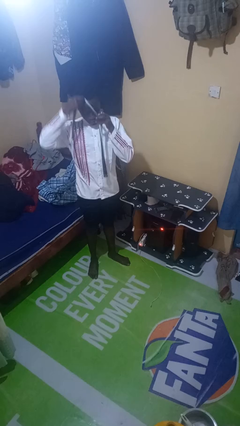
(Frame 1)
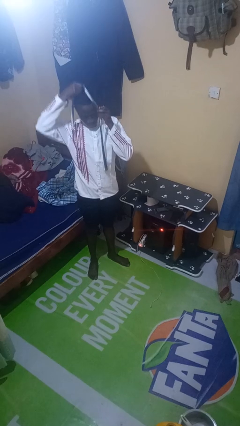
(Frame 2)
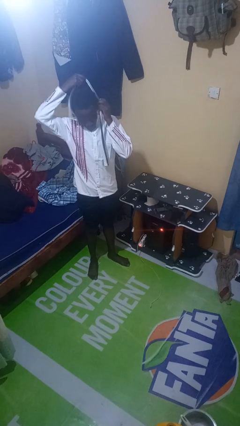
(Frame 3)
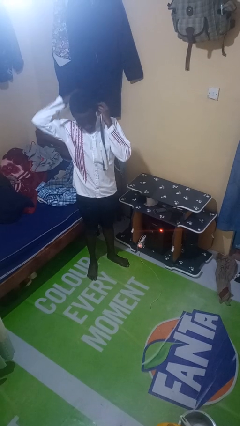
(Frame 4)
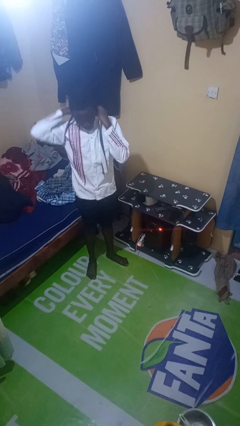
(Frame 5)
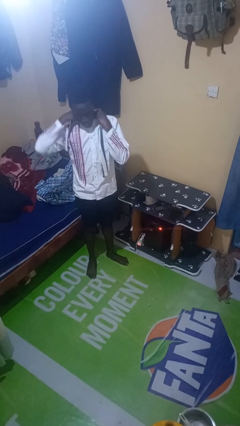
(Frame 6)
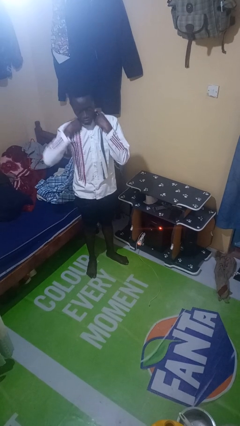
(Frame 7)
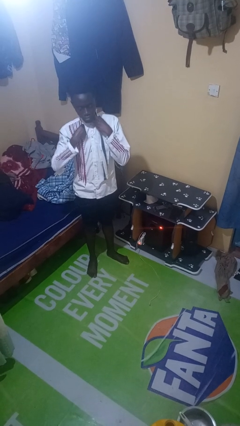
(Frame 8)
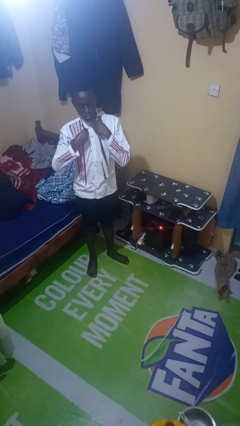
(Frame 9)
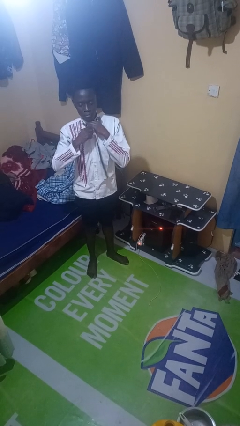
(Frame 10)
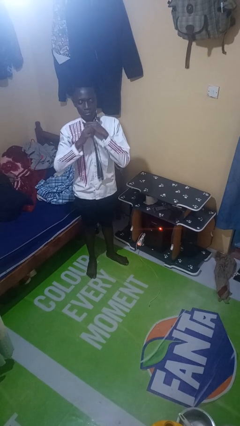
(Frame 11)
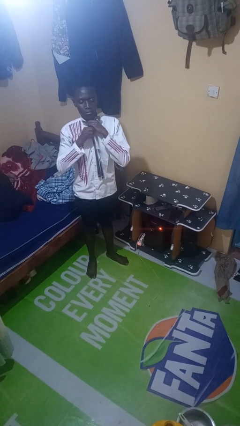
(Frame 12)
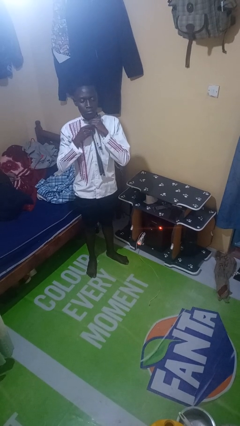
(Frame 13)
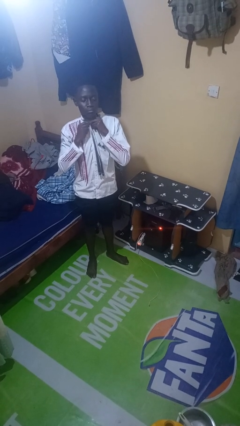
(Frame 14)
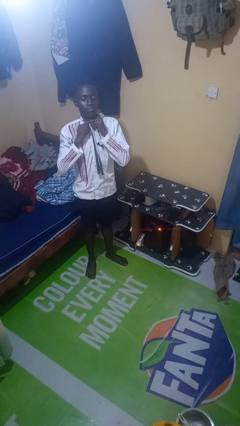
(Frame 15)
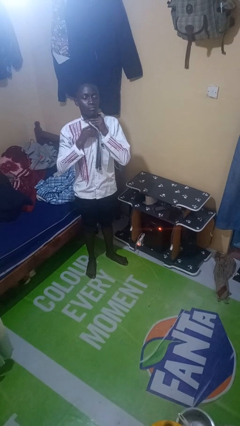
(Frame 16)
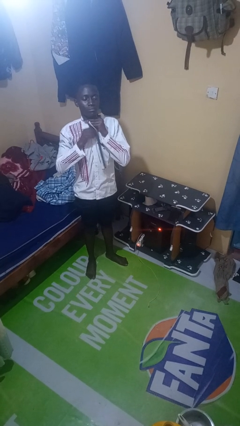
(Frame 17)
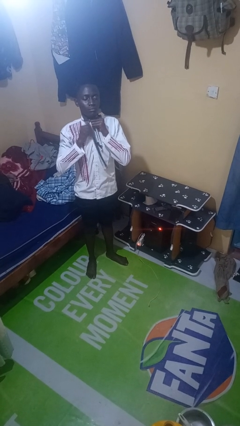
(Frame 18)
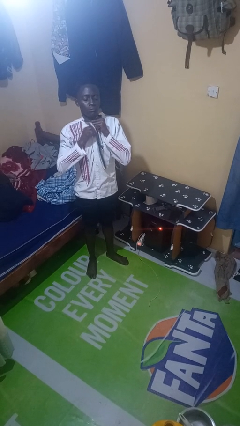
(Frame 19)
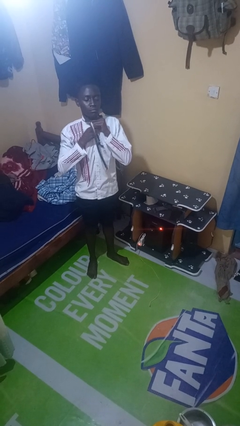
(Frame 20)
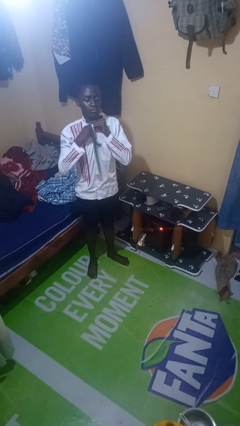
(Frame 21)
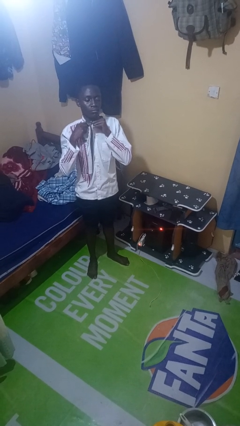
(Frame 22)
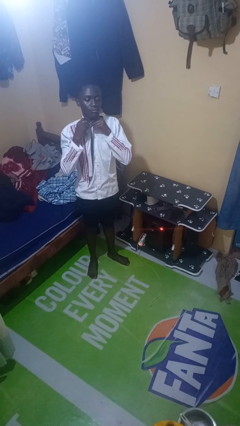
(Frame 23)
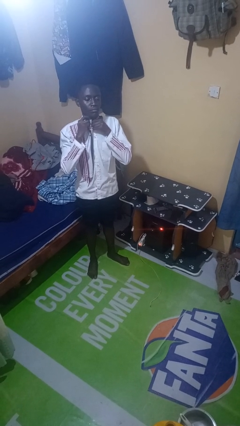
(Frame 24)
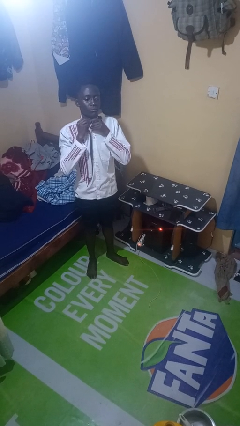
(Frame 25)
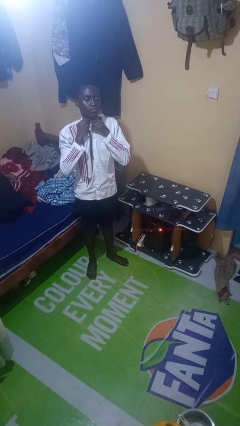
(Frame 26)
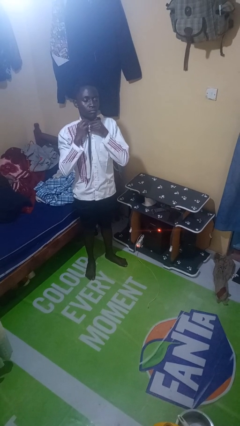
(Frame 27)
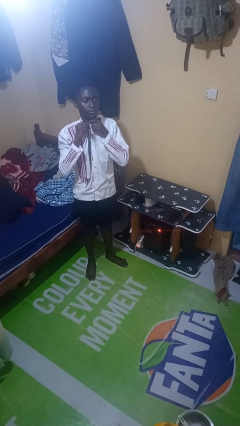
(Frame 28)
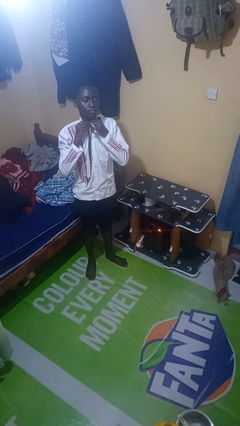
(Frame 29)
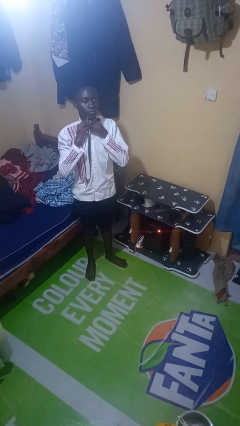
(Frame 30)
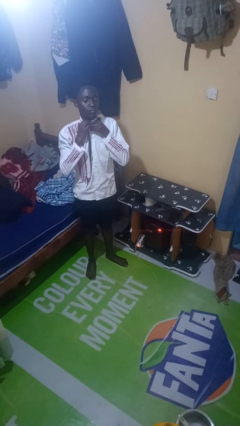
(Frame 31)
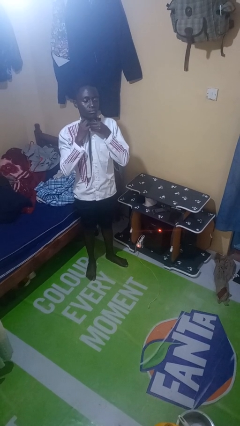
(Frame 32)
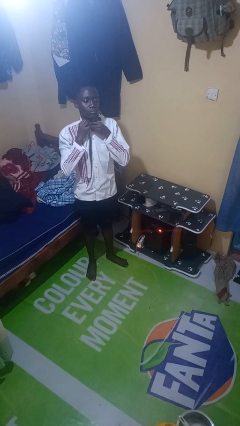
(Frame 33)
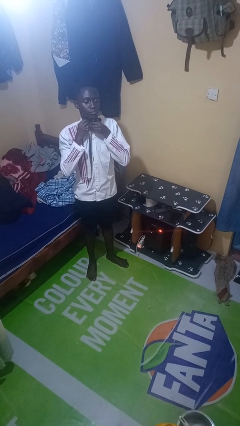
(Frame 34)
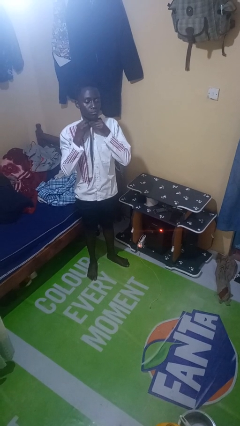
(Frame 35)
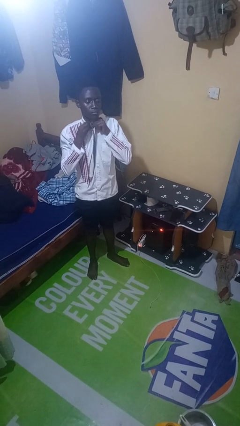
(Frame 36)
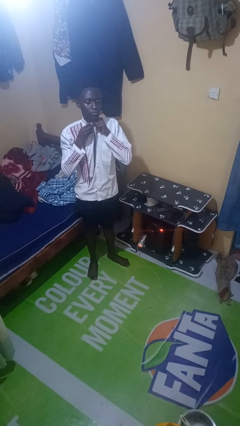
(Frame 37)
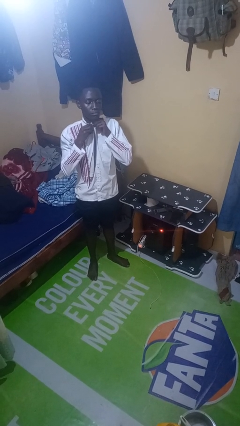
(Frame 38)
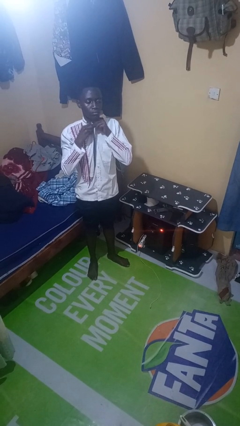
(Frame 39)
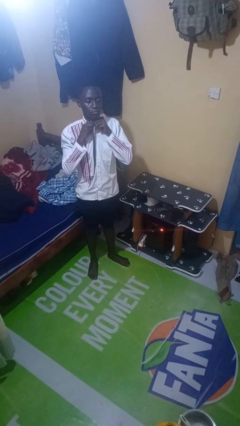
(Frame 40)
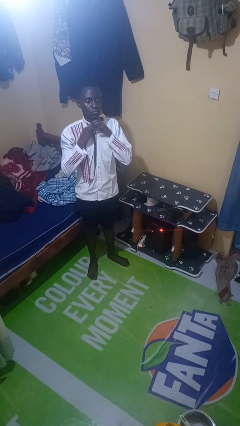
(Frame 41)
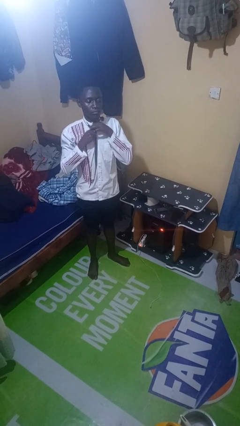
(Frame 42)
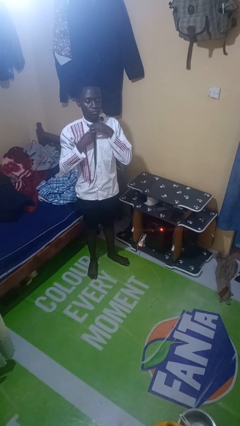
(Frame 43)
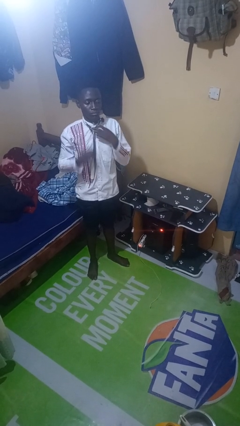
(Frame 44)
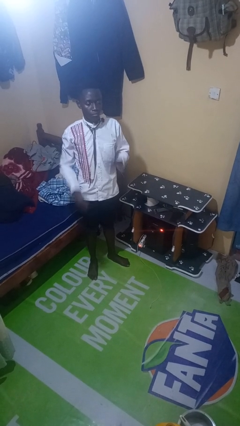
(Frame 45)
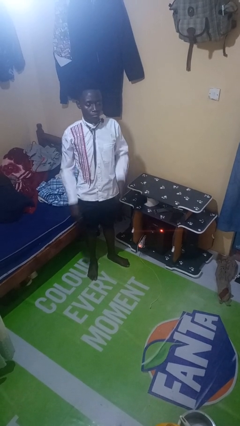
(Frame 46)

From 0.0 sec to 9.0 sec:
person puts on necktie

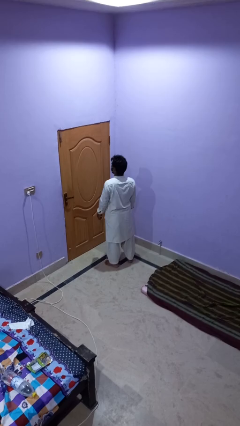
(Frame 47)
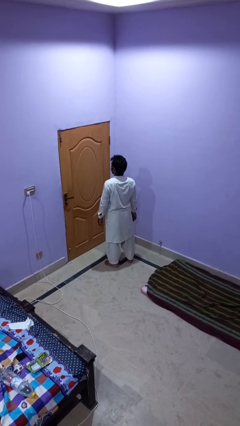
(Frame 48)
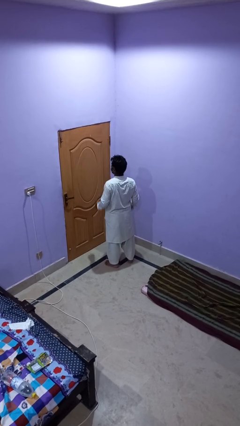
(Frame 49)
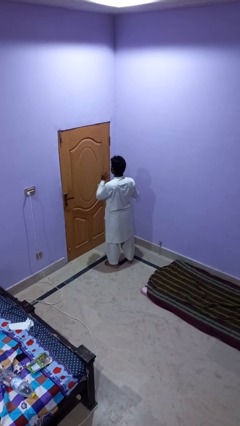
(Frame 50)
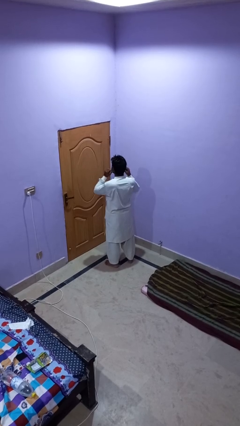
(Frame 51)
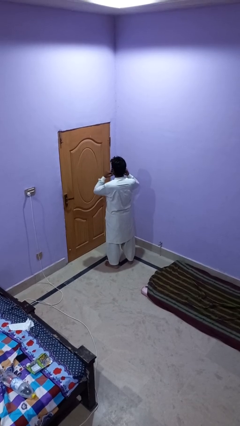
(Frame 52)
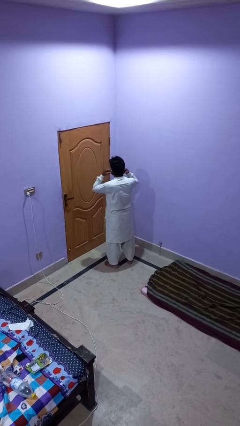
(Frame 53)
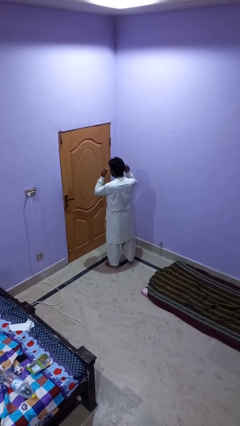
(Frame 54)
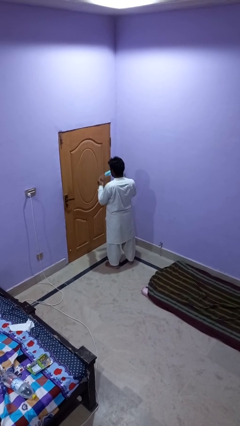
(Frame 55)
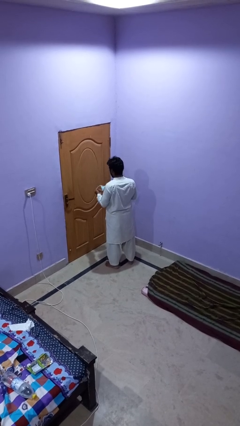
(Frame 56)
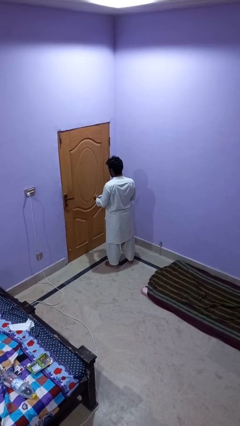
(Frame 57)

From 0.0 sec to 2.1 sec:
person takes off facemask

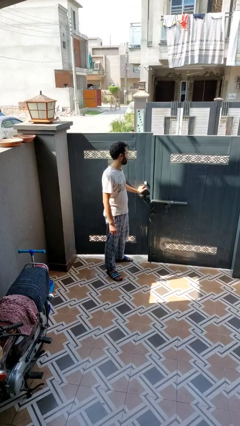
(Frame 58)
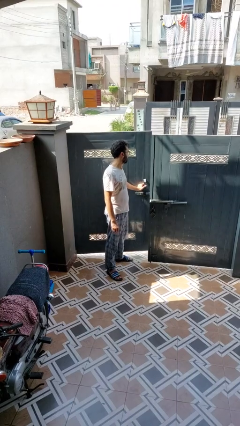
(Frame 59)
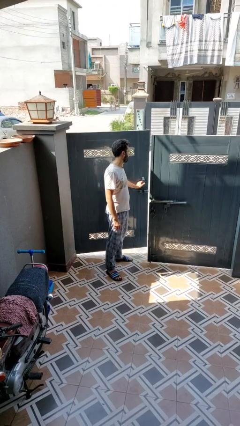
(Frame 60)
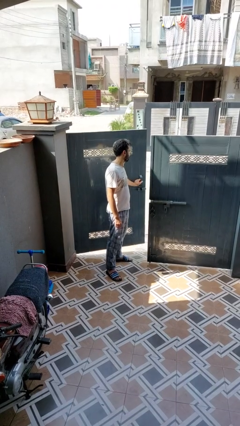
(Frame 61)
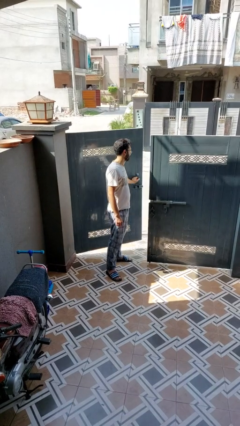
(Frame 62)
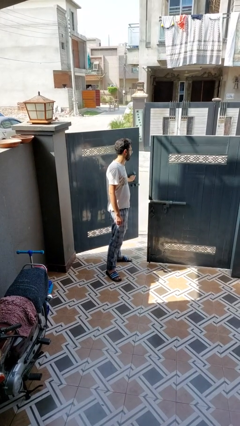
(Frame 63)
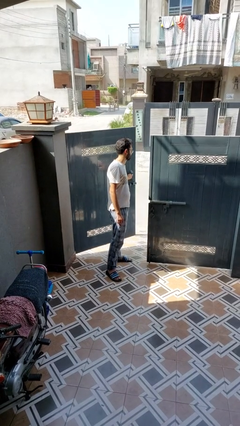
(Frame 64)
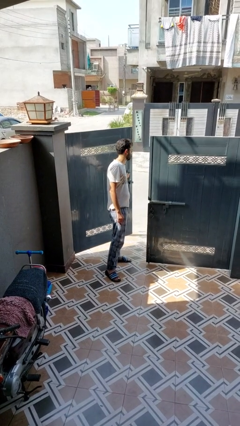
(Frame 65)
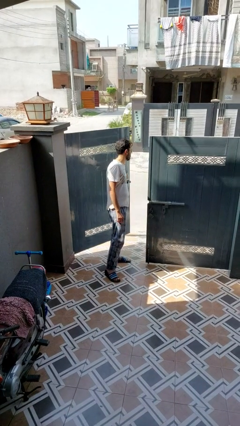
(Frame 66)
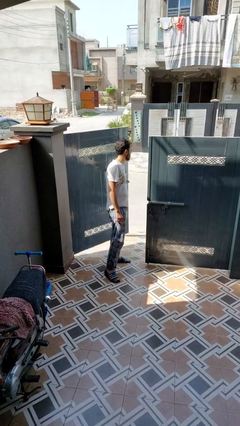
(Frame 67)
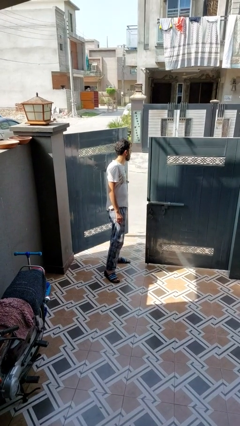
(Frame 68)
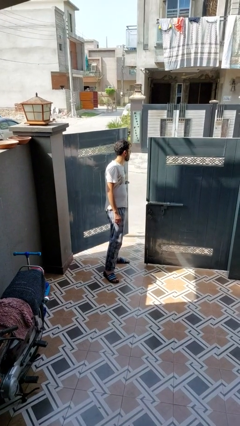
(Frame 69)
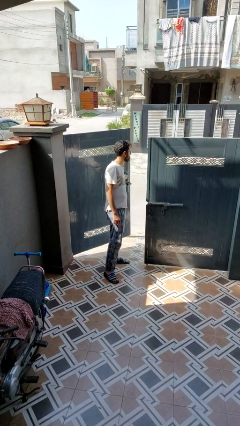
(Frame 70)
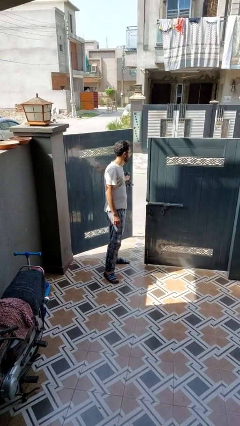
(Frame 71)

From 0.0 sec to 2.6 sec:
person opens gate

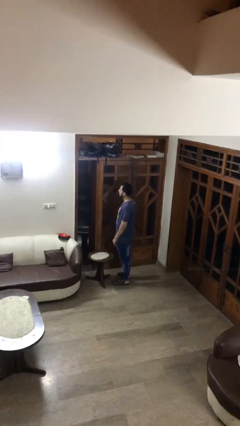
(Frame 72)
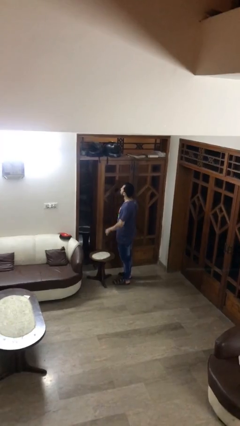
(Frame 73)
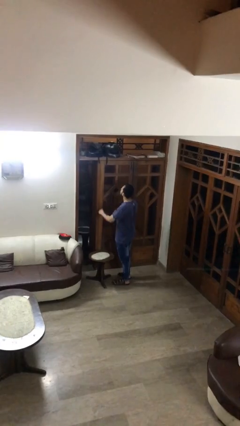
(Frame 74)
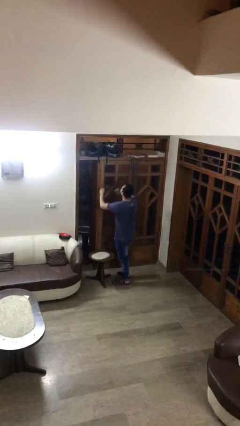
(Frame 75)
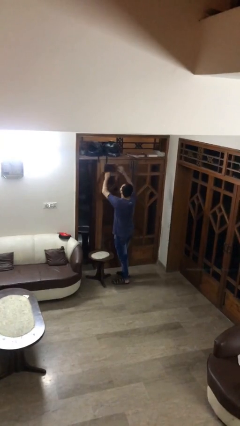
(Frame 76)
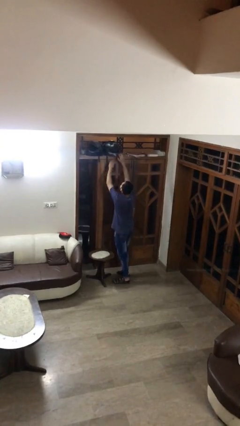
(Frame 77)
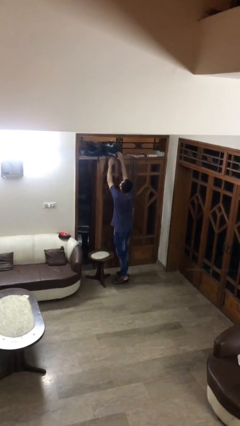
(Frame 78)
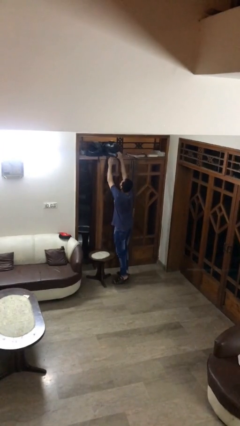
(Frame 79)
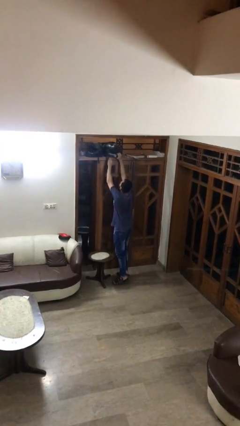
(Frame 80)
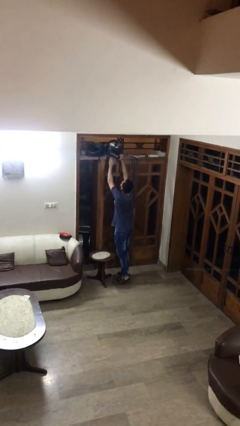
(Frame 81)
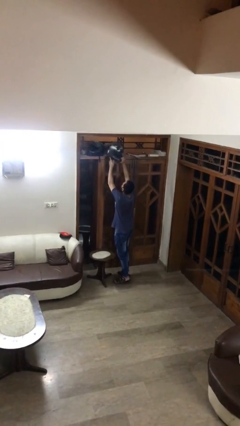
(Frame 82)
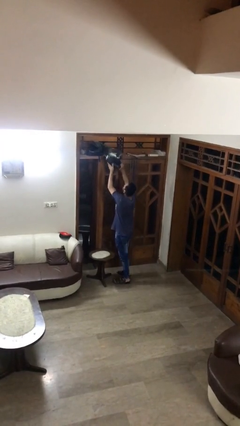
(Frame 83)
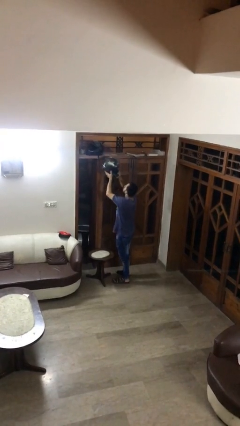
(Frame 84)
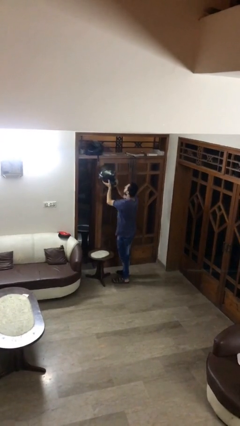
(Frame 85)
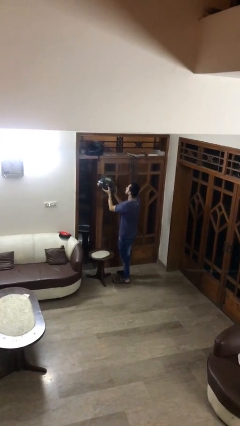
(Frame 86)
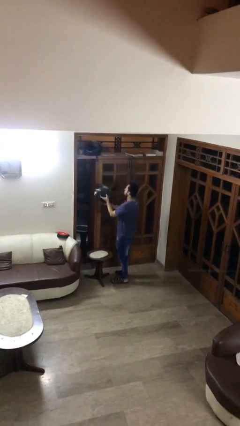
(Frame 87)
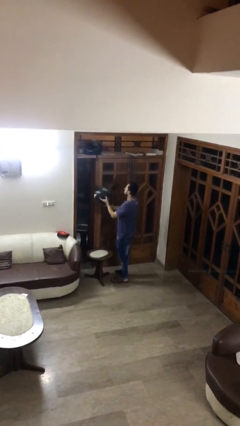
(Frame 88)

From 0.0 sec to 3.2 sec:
person picks up object from shelf

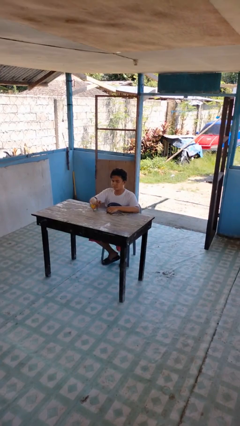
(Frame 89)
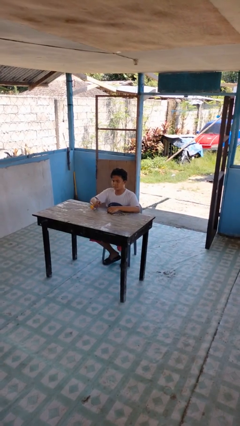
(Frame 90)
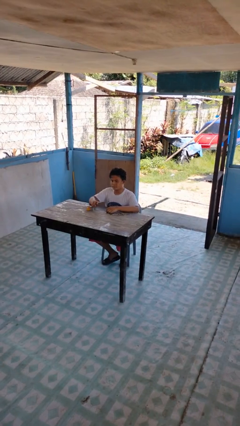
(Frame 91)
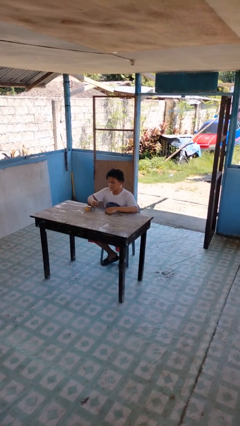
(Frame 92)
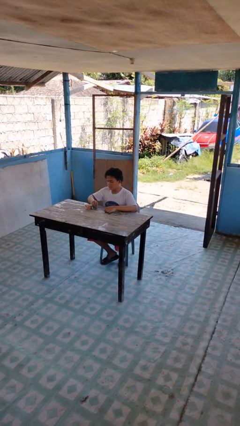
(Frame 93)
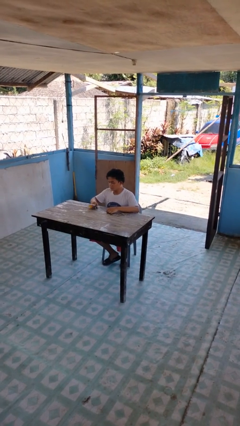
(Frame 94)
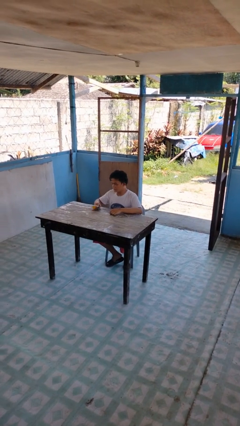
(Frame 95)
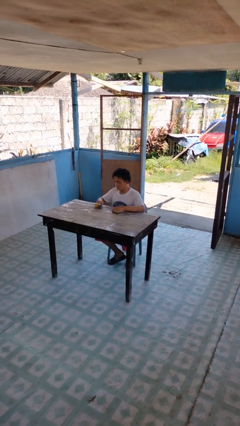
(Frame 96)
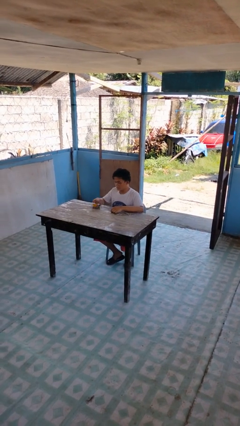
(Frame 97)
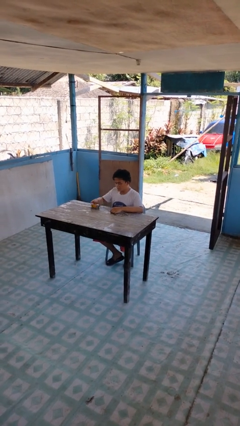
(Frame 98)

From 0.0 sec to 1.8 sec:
person knocks over glass
